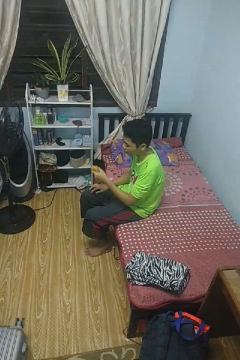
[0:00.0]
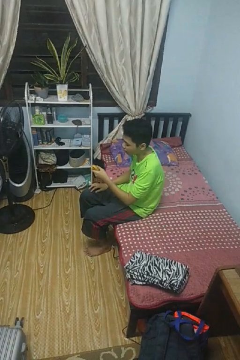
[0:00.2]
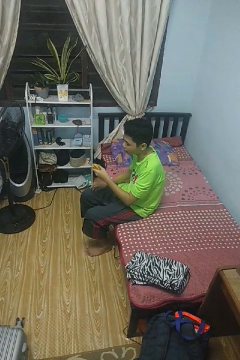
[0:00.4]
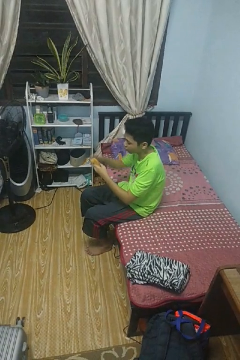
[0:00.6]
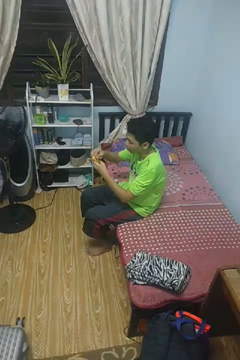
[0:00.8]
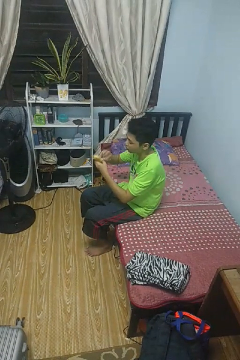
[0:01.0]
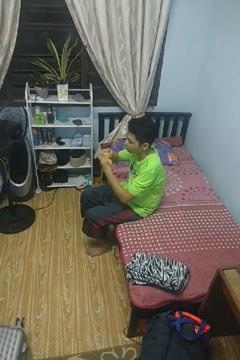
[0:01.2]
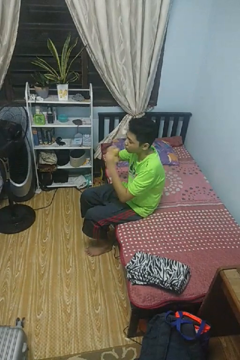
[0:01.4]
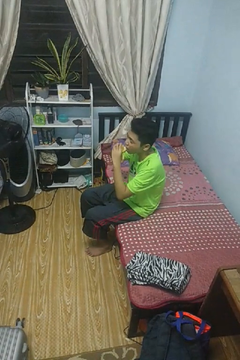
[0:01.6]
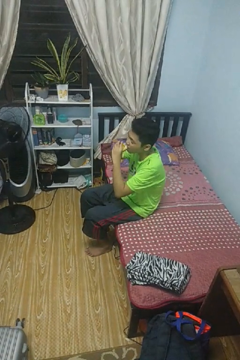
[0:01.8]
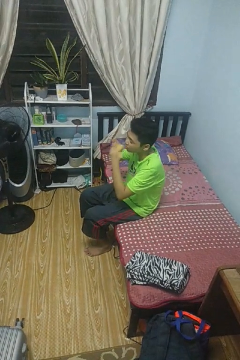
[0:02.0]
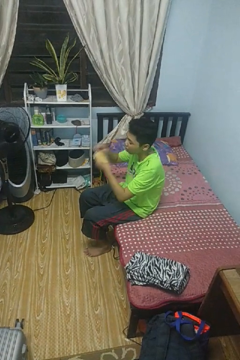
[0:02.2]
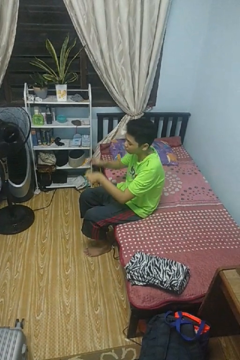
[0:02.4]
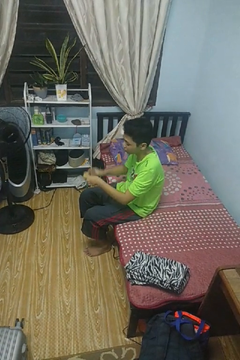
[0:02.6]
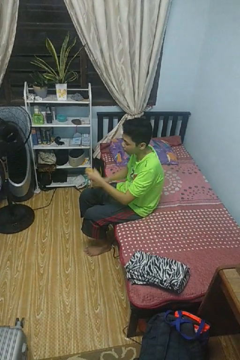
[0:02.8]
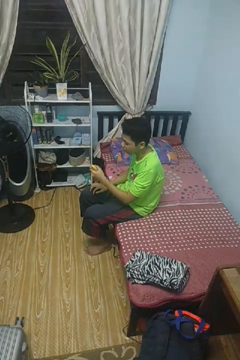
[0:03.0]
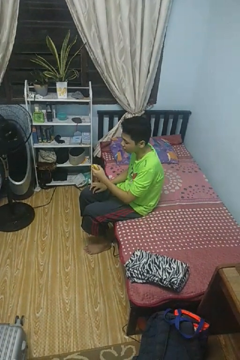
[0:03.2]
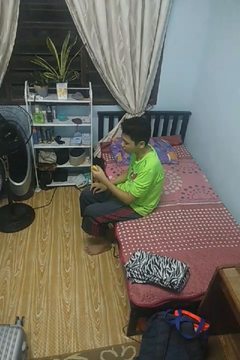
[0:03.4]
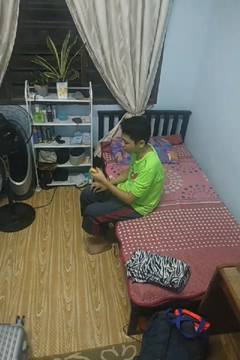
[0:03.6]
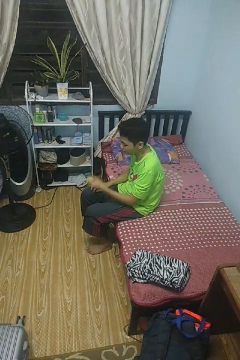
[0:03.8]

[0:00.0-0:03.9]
person eats banana

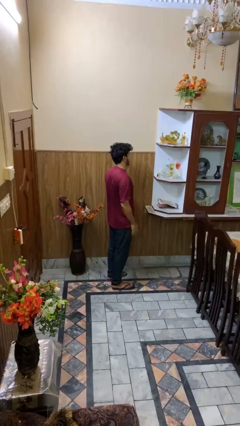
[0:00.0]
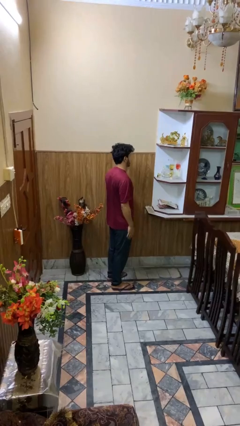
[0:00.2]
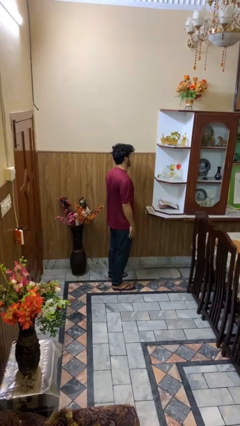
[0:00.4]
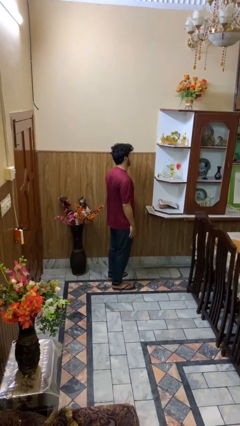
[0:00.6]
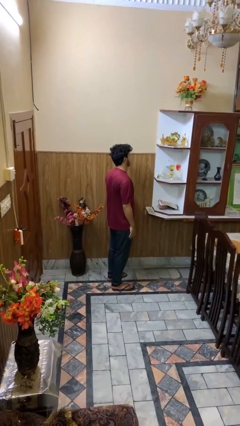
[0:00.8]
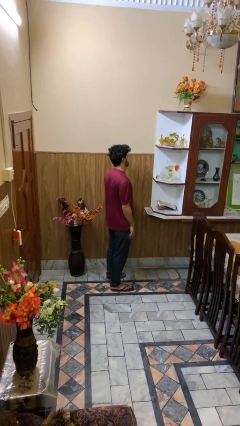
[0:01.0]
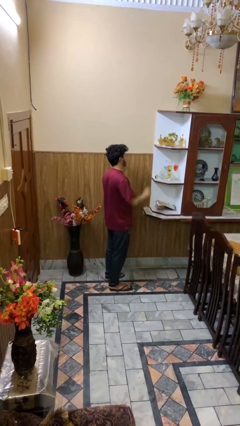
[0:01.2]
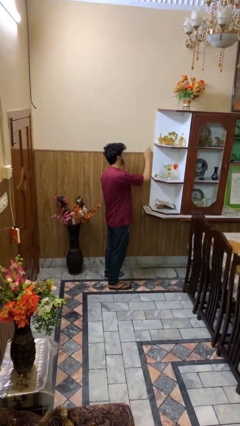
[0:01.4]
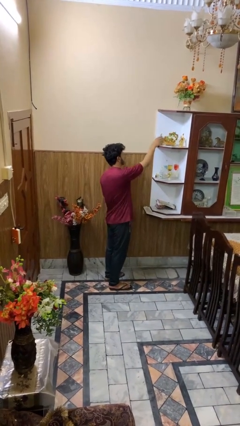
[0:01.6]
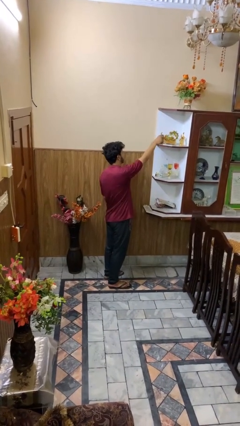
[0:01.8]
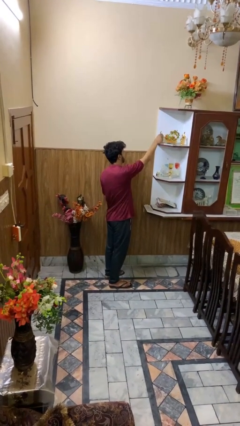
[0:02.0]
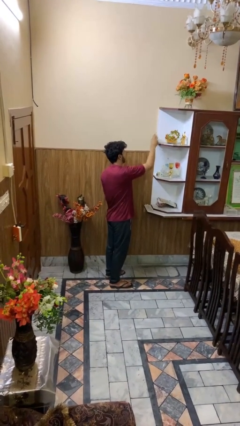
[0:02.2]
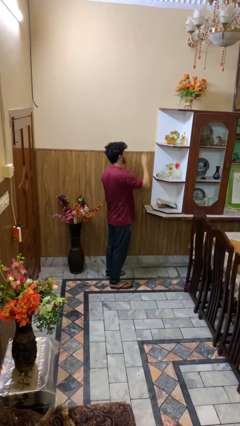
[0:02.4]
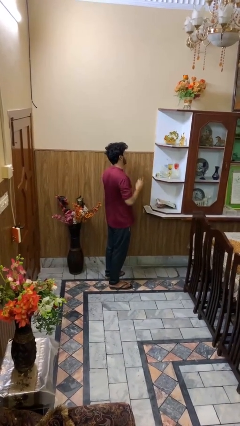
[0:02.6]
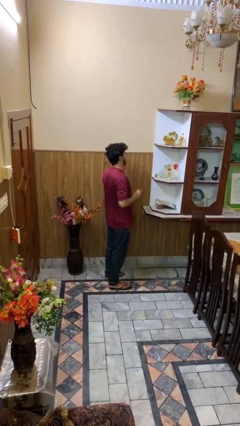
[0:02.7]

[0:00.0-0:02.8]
person picks up object from shelf

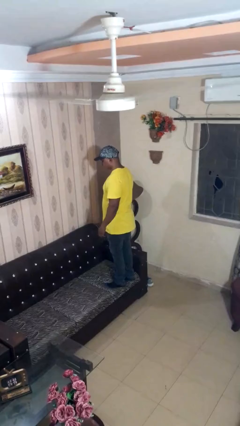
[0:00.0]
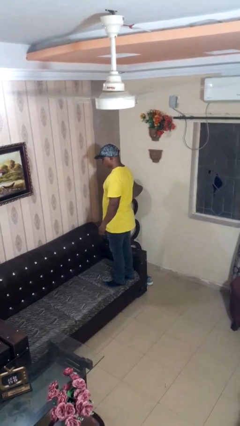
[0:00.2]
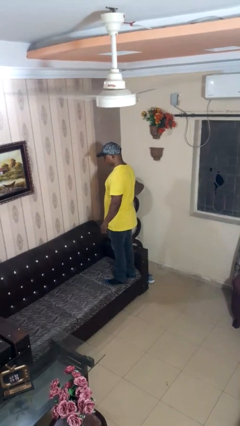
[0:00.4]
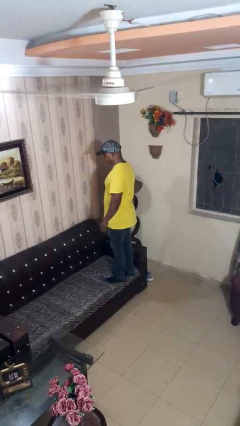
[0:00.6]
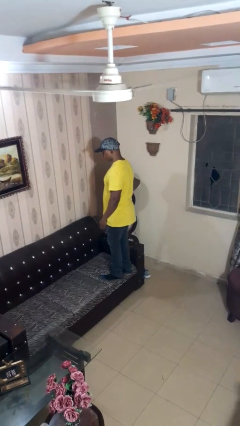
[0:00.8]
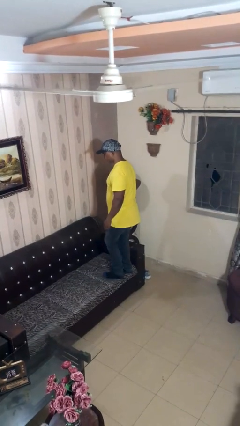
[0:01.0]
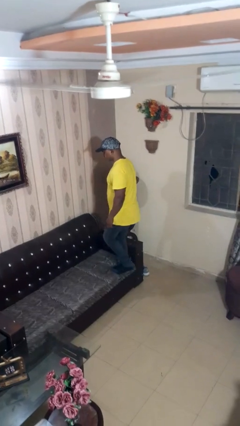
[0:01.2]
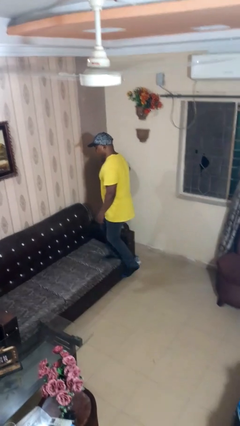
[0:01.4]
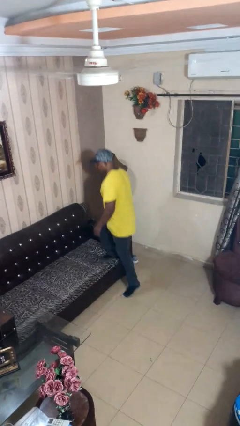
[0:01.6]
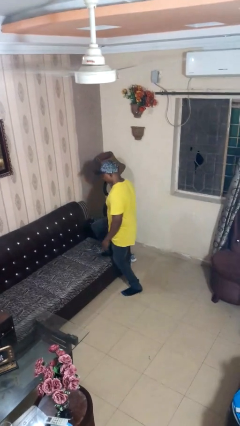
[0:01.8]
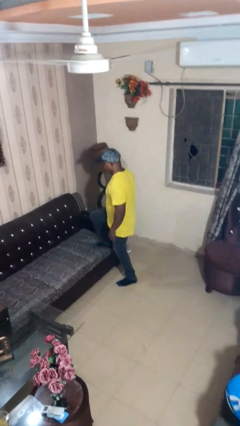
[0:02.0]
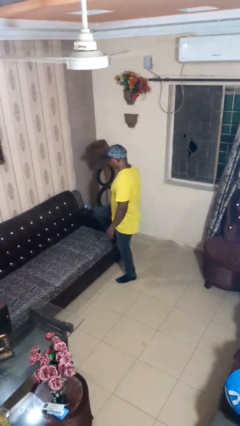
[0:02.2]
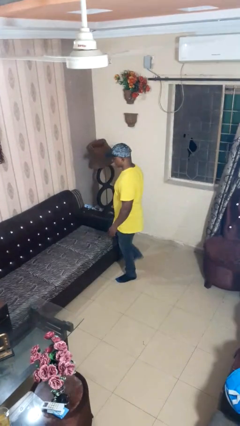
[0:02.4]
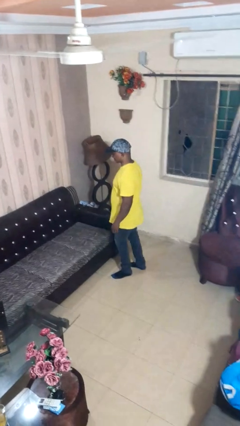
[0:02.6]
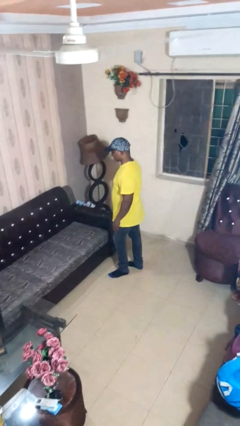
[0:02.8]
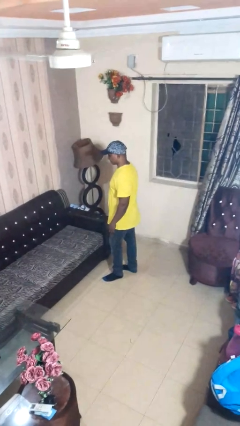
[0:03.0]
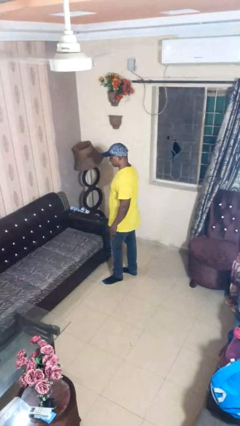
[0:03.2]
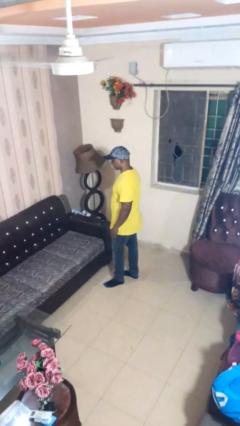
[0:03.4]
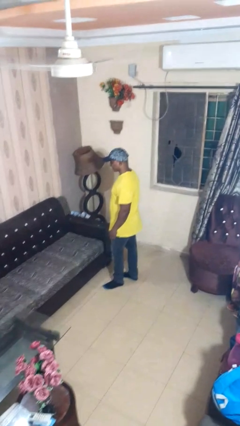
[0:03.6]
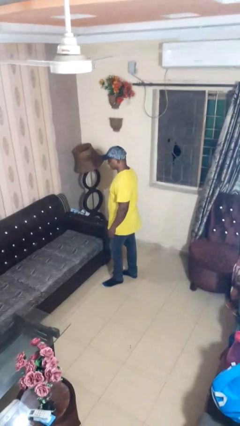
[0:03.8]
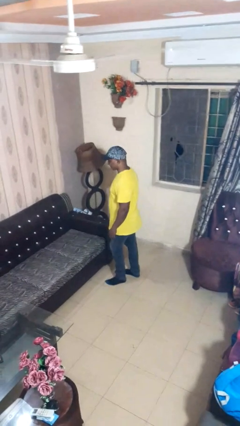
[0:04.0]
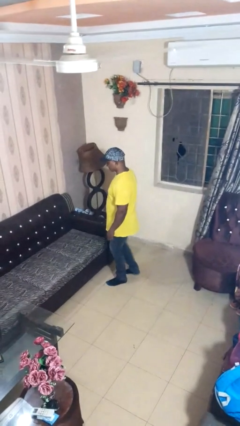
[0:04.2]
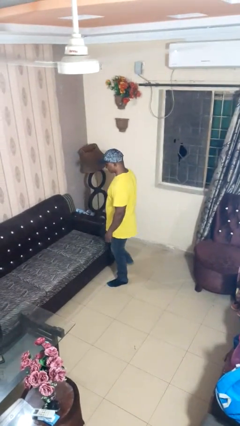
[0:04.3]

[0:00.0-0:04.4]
person climbs off couch

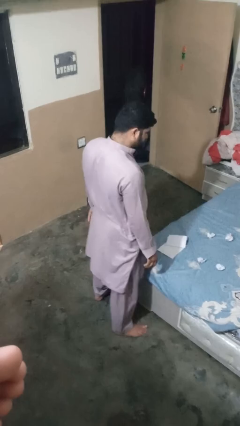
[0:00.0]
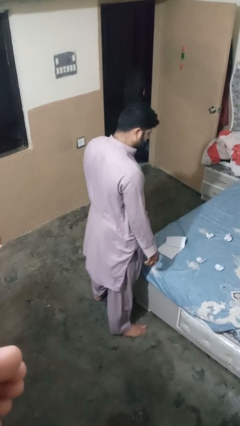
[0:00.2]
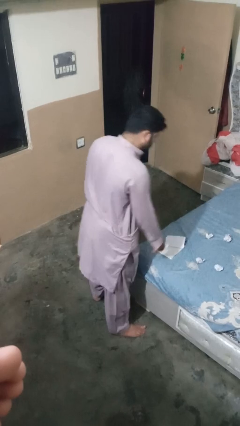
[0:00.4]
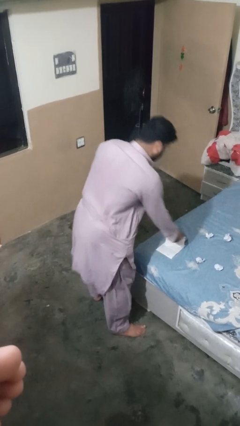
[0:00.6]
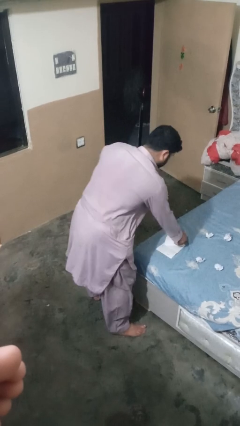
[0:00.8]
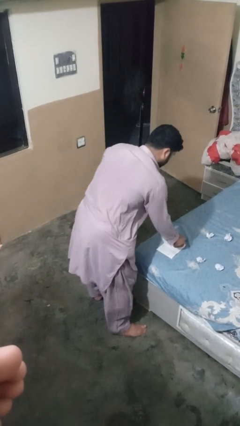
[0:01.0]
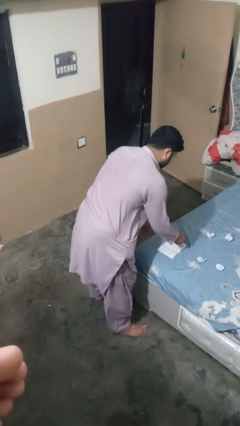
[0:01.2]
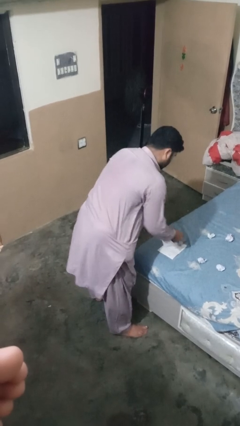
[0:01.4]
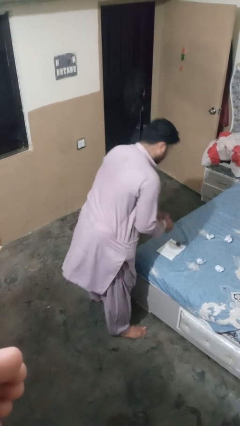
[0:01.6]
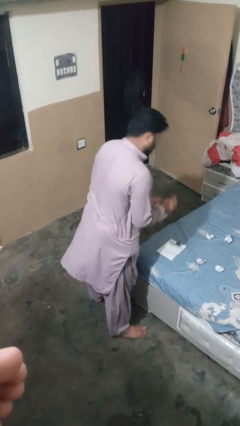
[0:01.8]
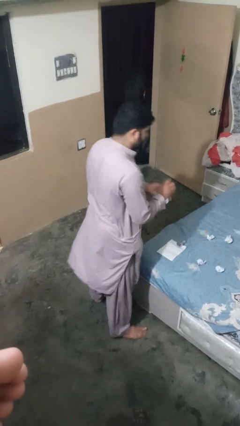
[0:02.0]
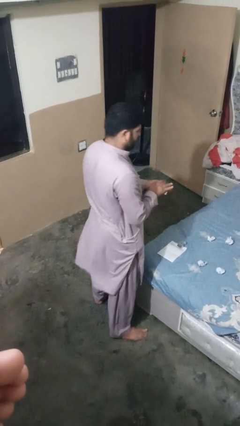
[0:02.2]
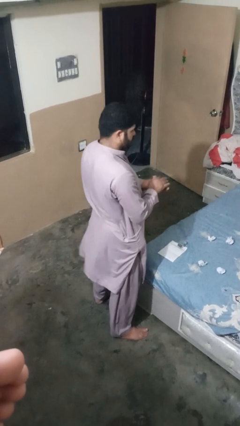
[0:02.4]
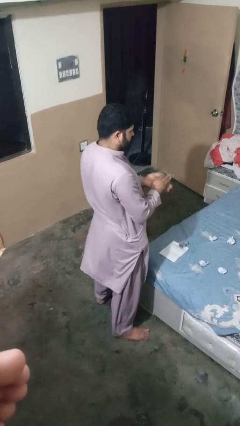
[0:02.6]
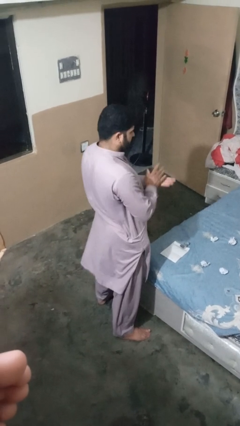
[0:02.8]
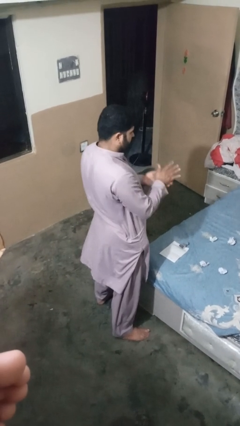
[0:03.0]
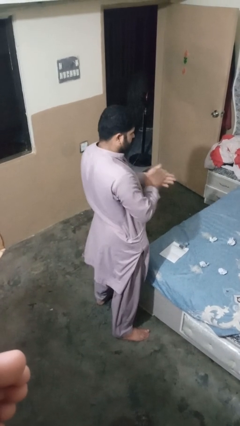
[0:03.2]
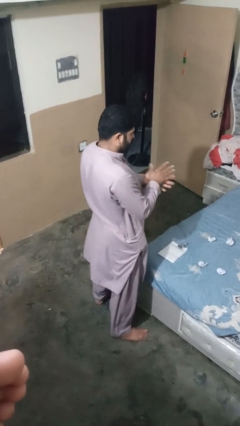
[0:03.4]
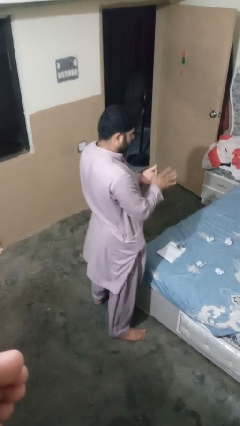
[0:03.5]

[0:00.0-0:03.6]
person crumples paper

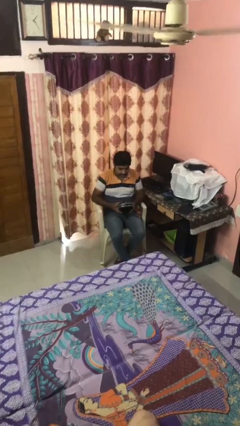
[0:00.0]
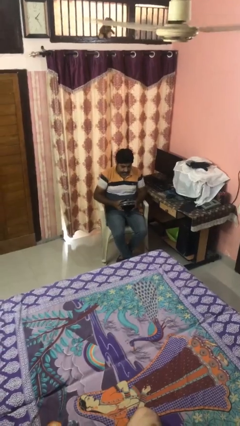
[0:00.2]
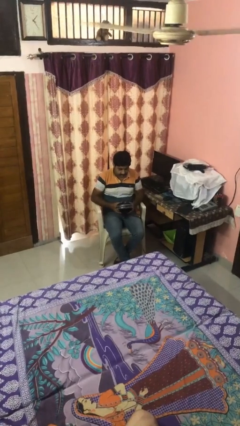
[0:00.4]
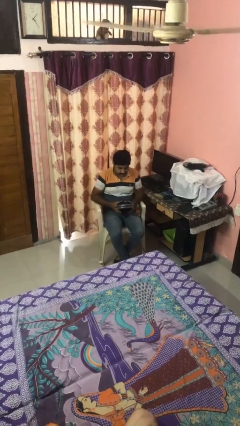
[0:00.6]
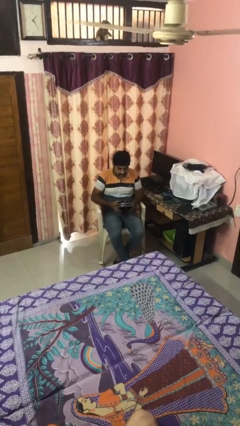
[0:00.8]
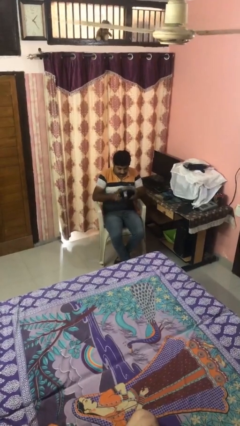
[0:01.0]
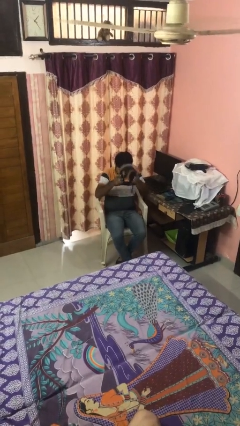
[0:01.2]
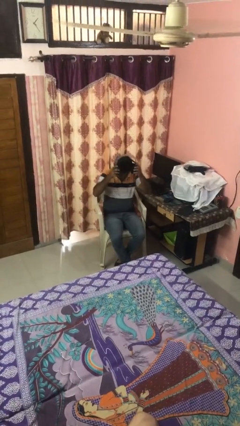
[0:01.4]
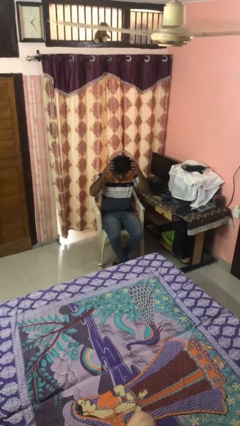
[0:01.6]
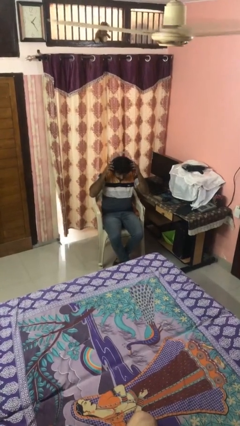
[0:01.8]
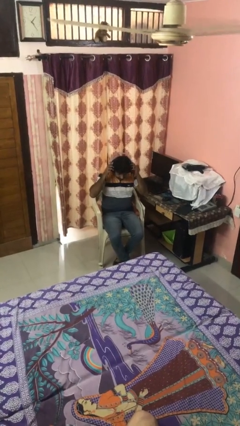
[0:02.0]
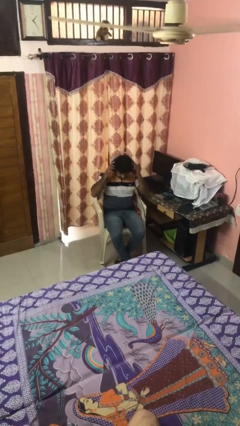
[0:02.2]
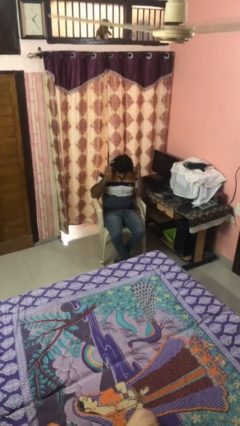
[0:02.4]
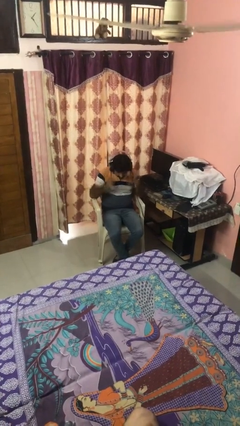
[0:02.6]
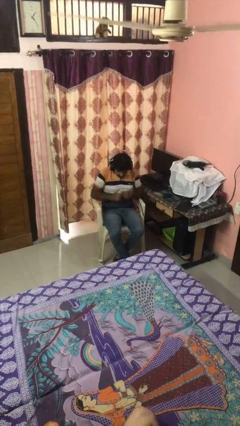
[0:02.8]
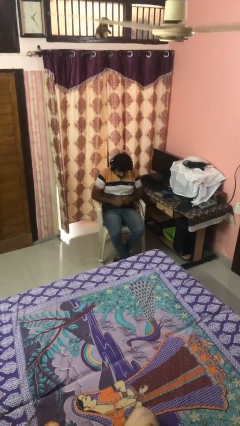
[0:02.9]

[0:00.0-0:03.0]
person puts on headphones

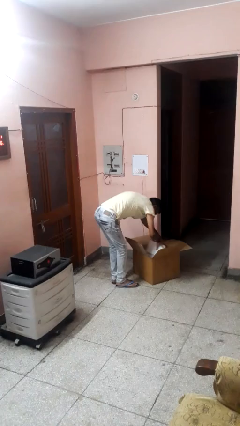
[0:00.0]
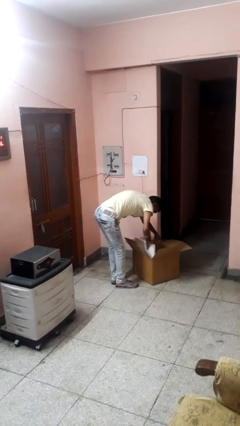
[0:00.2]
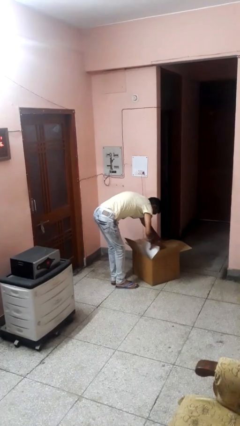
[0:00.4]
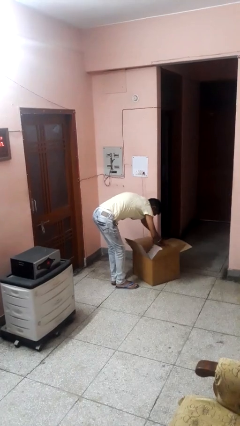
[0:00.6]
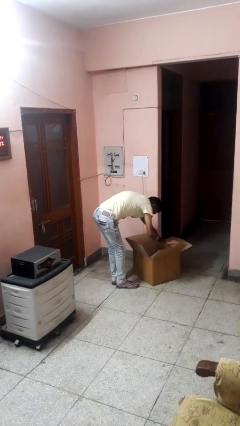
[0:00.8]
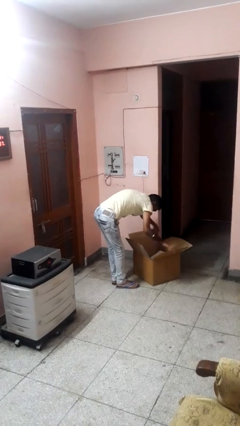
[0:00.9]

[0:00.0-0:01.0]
person searches in box
